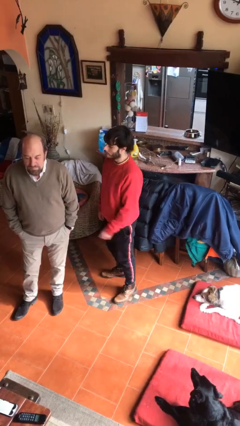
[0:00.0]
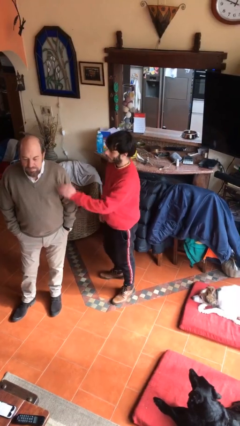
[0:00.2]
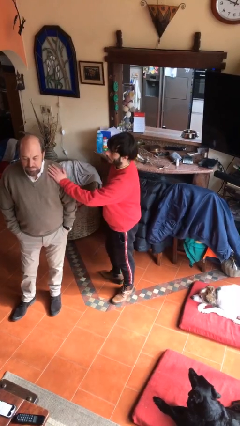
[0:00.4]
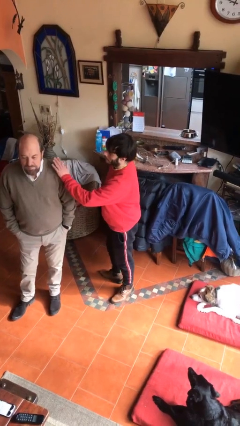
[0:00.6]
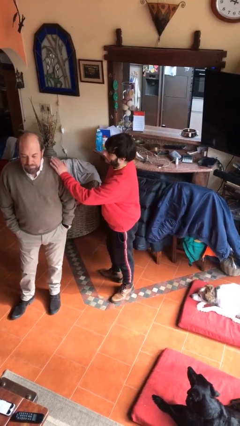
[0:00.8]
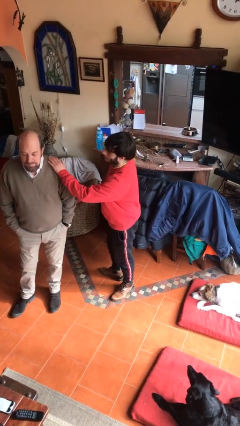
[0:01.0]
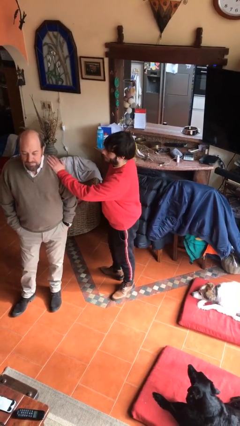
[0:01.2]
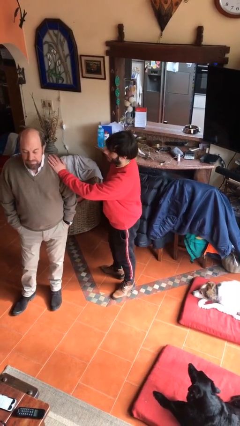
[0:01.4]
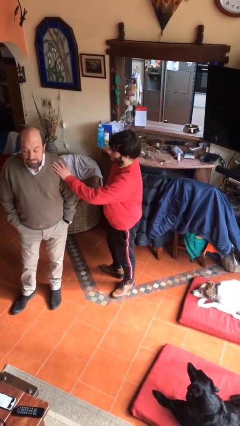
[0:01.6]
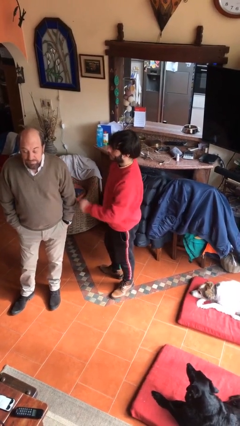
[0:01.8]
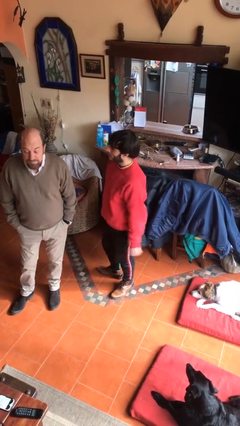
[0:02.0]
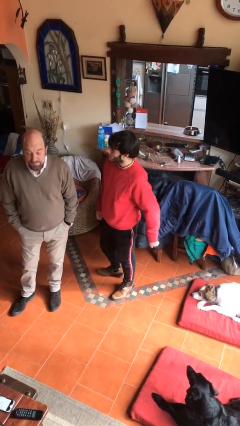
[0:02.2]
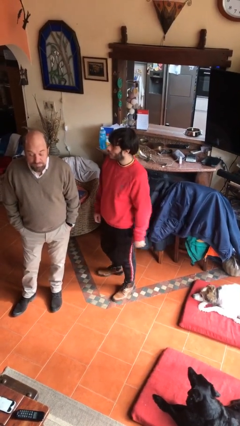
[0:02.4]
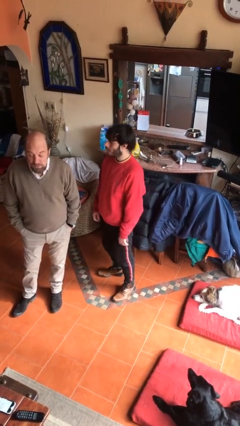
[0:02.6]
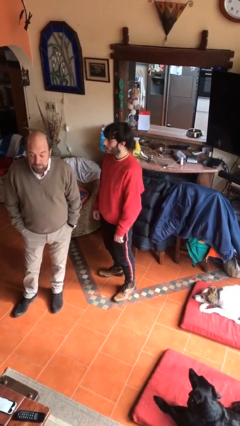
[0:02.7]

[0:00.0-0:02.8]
person pounds shoulders of person

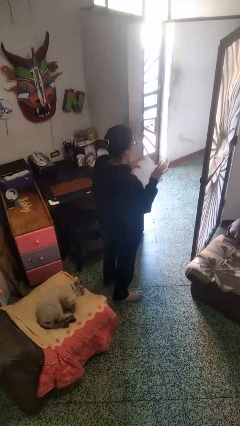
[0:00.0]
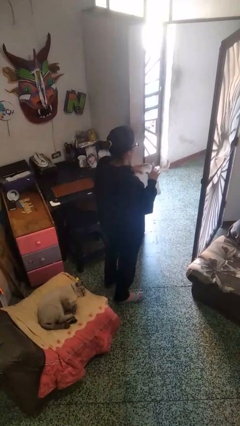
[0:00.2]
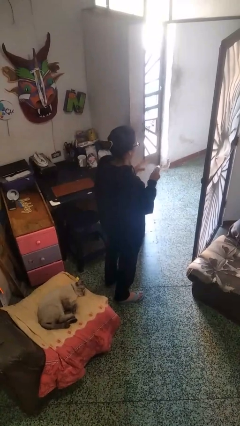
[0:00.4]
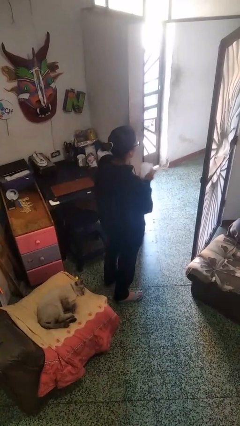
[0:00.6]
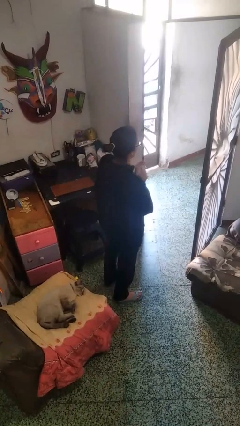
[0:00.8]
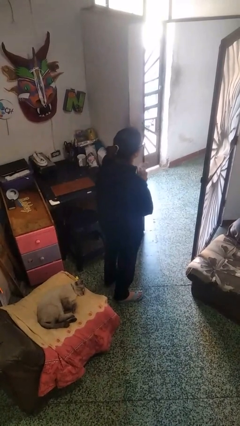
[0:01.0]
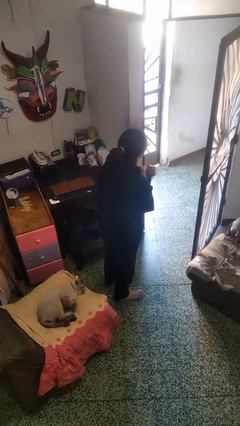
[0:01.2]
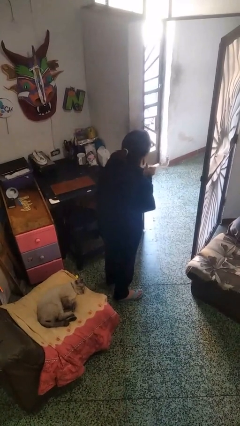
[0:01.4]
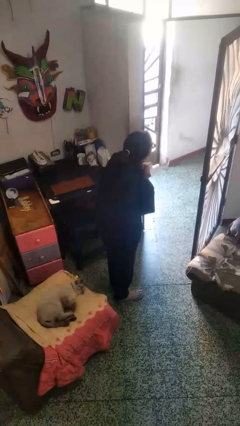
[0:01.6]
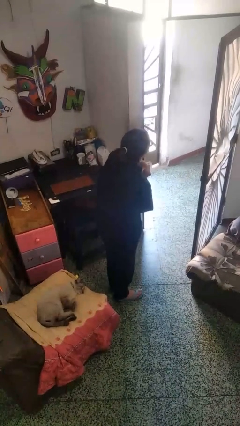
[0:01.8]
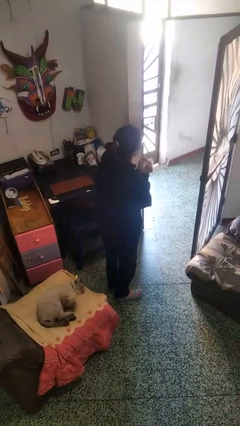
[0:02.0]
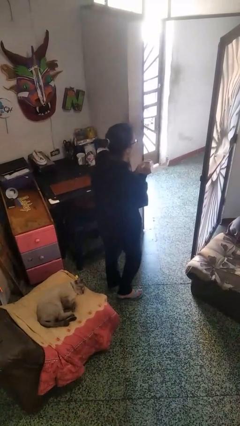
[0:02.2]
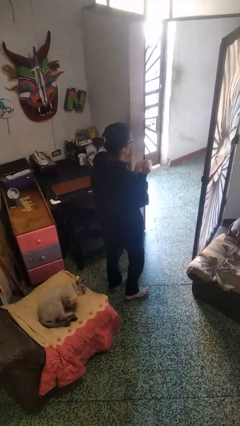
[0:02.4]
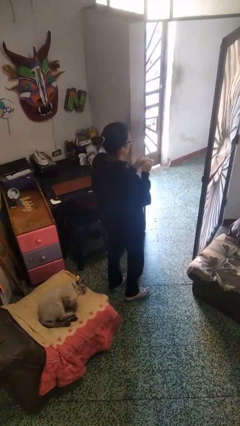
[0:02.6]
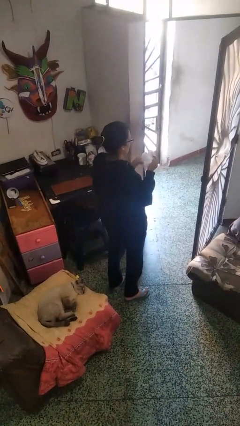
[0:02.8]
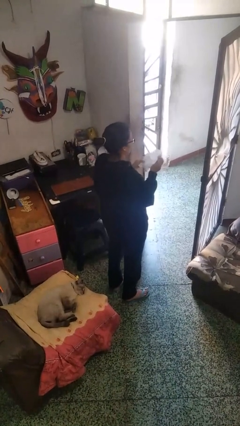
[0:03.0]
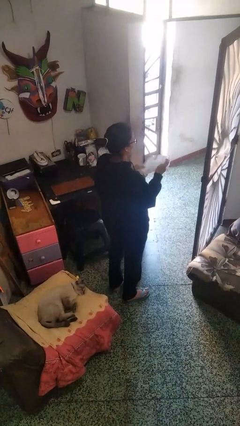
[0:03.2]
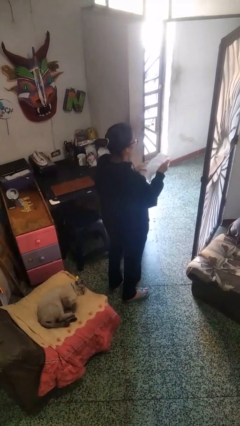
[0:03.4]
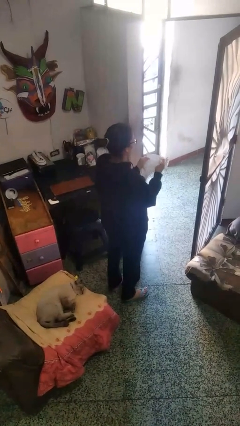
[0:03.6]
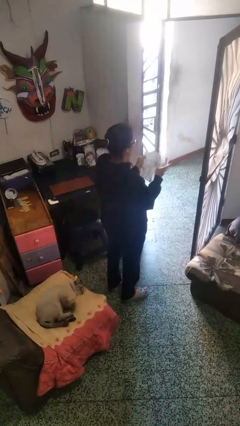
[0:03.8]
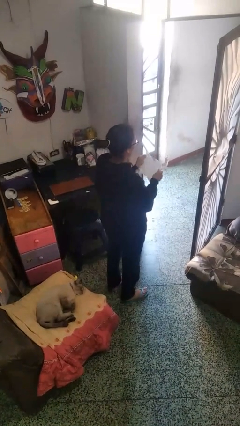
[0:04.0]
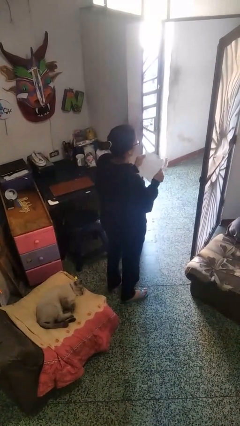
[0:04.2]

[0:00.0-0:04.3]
person crumples paper

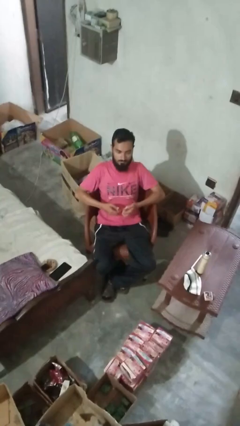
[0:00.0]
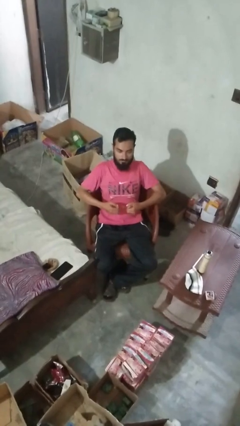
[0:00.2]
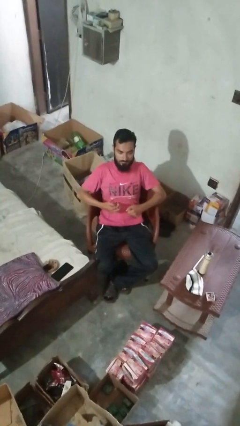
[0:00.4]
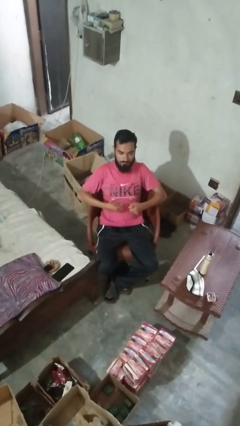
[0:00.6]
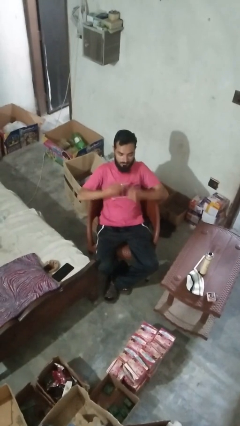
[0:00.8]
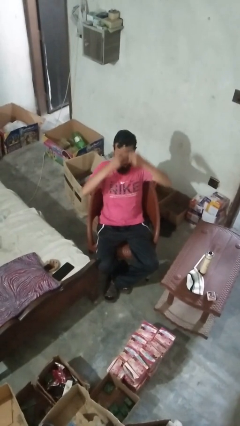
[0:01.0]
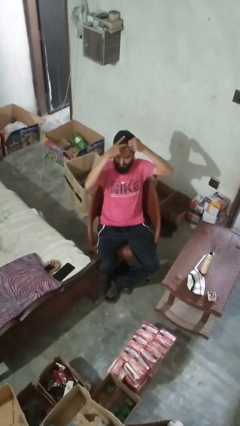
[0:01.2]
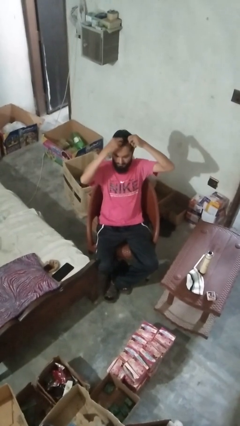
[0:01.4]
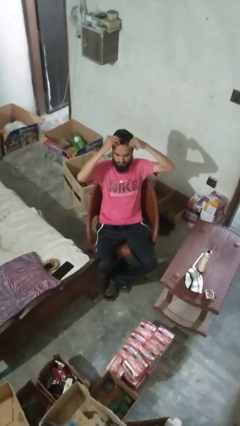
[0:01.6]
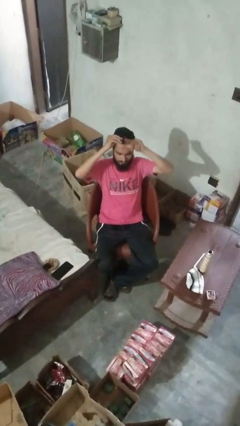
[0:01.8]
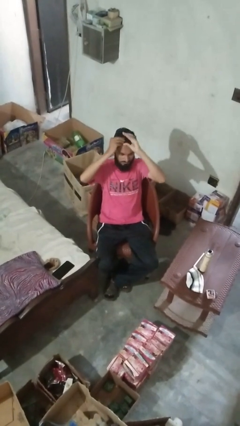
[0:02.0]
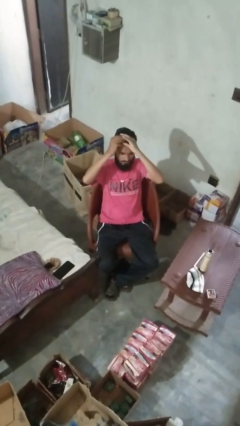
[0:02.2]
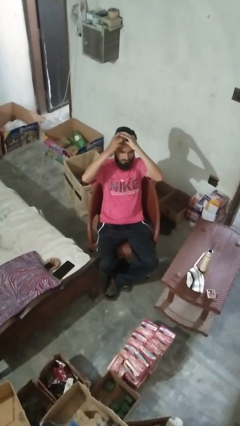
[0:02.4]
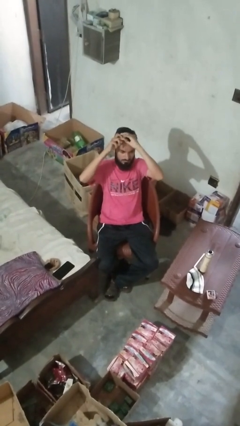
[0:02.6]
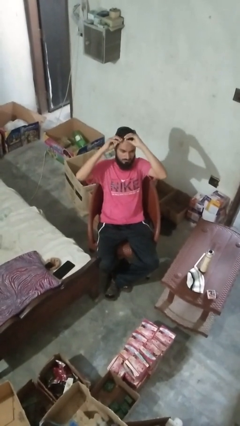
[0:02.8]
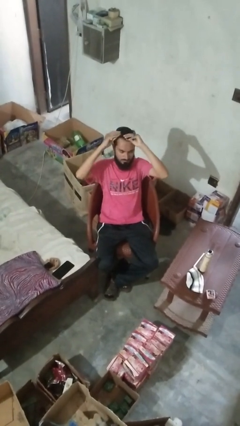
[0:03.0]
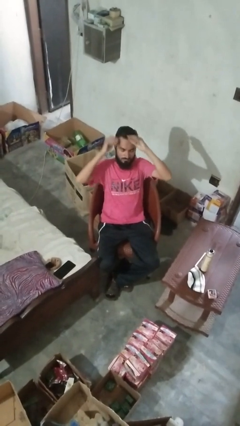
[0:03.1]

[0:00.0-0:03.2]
person puts hair in ponytail

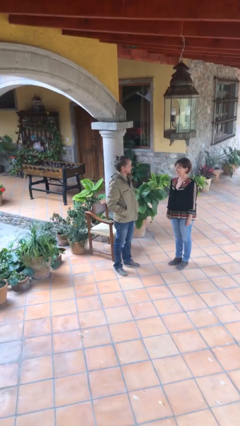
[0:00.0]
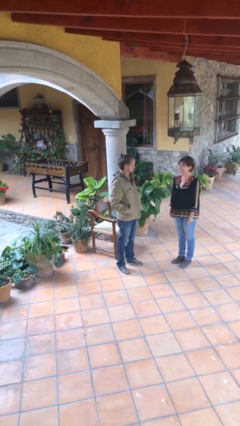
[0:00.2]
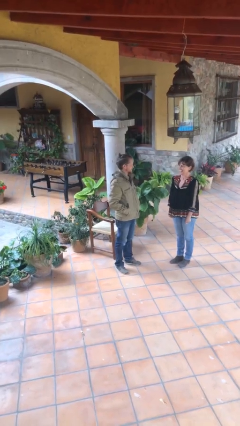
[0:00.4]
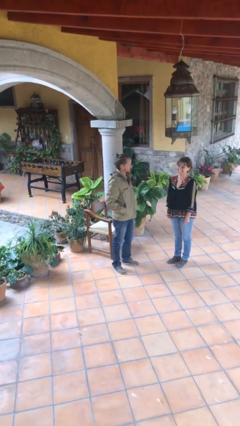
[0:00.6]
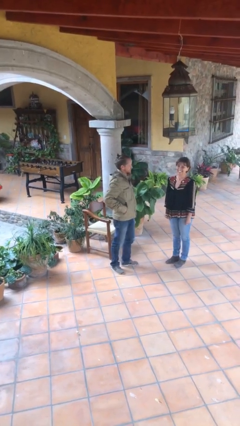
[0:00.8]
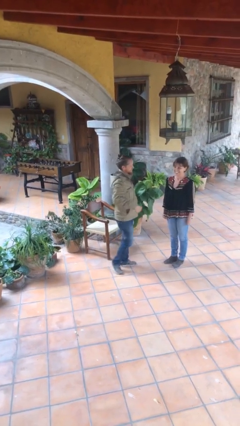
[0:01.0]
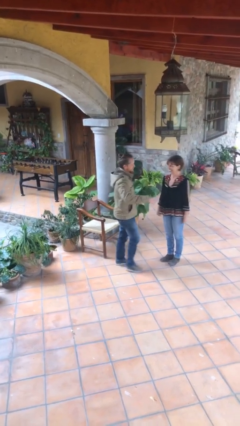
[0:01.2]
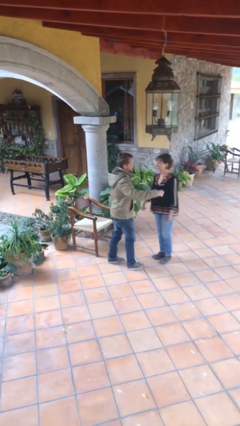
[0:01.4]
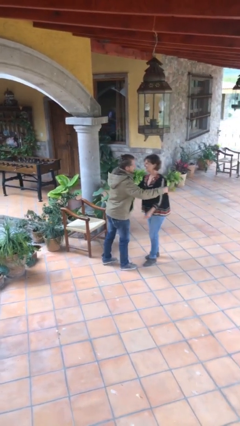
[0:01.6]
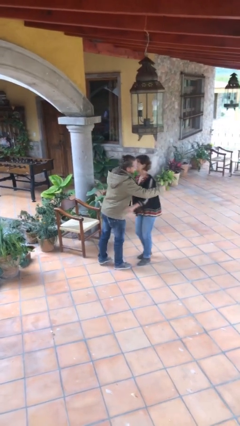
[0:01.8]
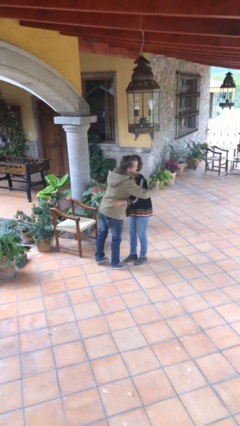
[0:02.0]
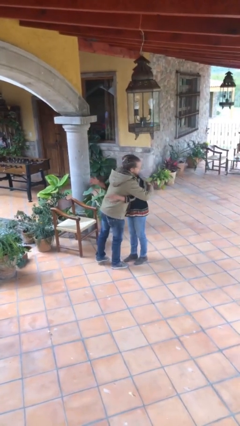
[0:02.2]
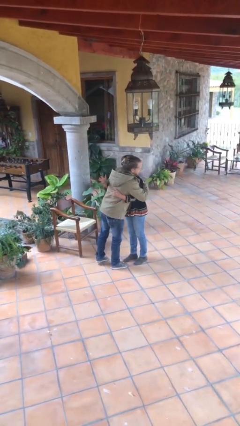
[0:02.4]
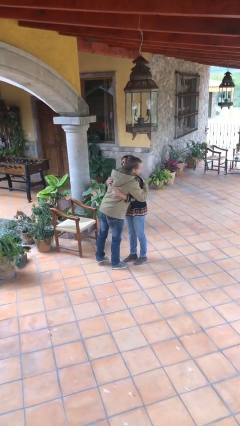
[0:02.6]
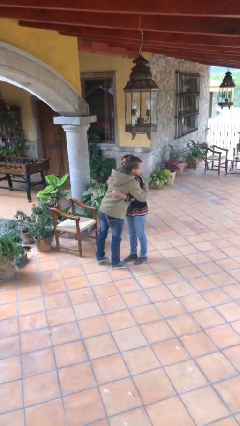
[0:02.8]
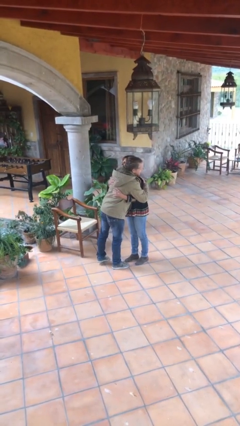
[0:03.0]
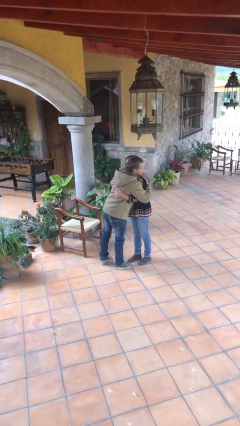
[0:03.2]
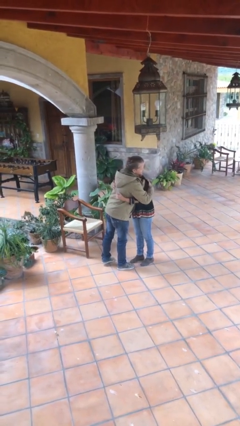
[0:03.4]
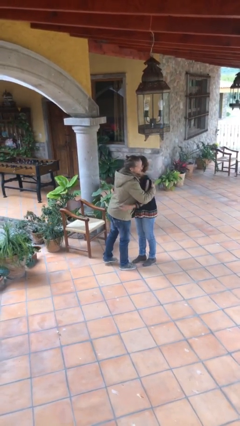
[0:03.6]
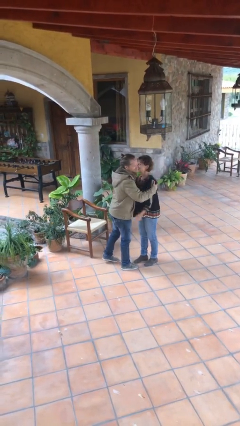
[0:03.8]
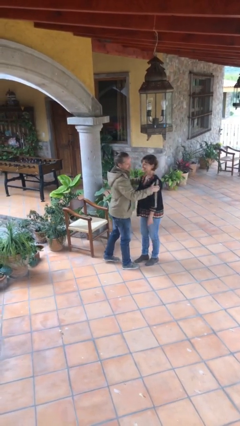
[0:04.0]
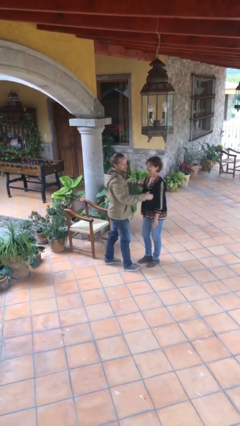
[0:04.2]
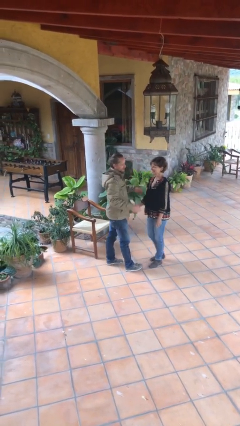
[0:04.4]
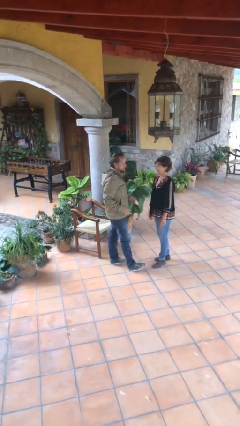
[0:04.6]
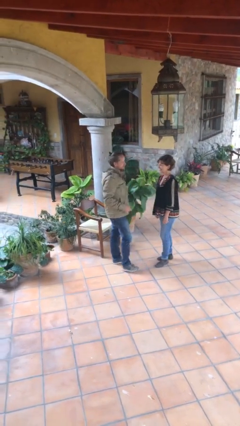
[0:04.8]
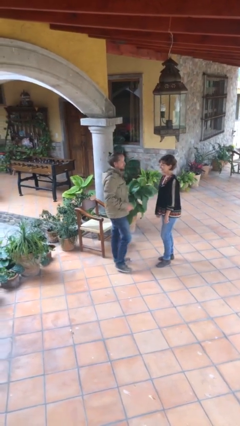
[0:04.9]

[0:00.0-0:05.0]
person embraces person

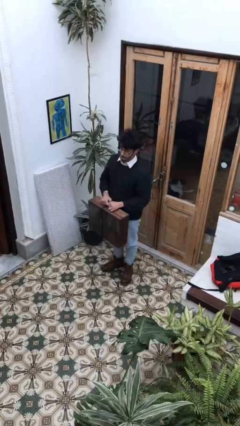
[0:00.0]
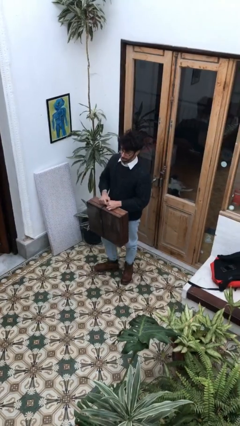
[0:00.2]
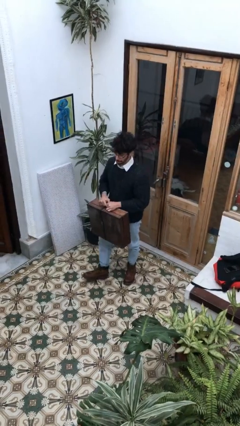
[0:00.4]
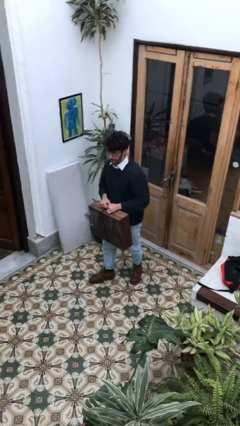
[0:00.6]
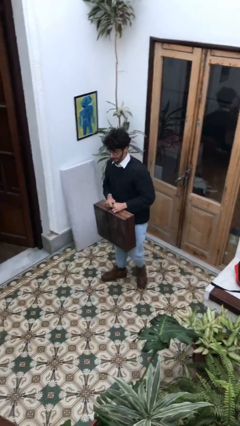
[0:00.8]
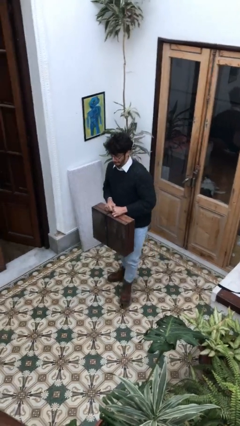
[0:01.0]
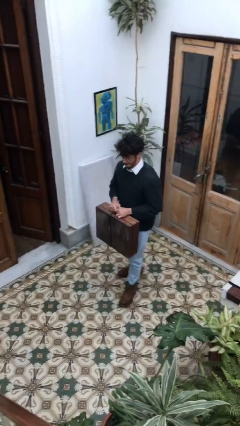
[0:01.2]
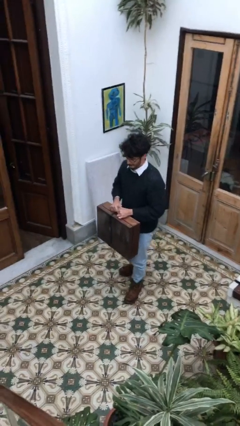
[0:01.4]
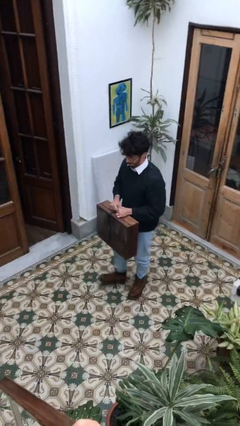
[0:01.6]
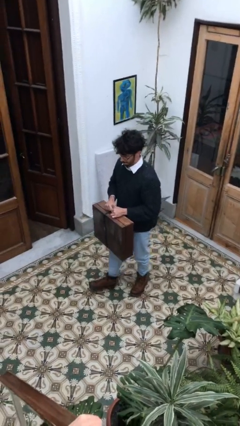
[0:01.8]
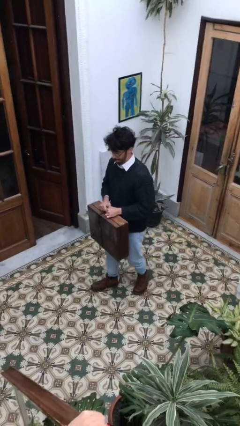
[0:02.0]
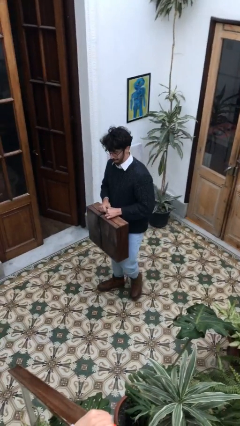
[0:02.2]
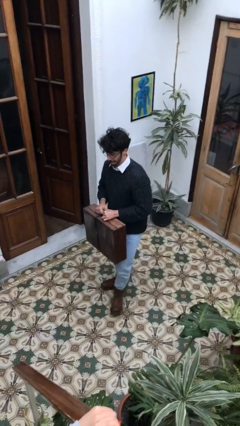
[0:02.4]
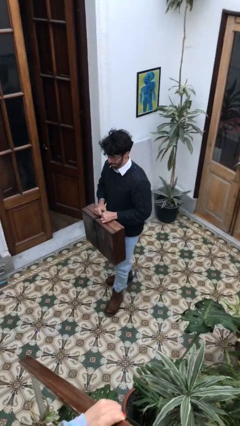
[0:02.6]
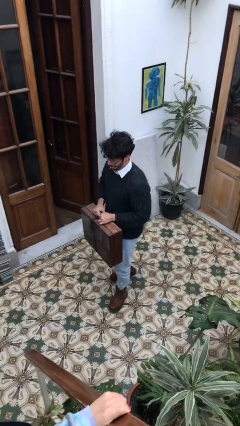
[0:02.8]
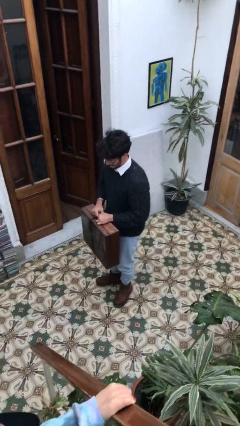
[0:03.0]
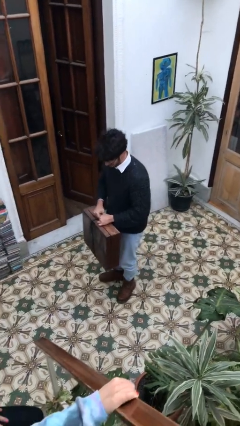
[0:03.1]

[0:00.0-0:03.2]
person carries heavy object
